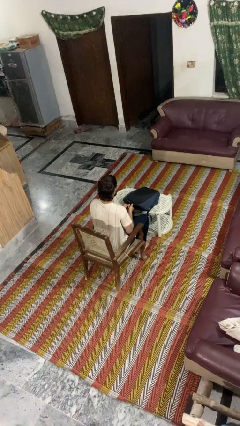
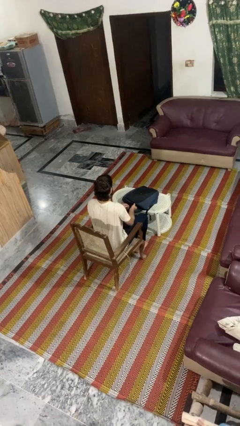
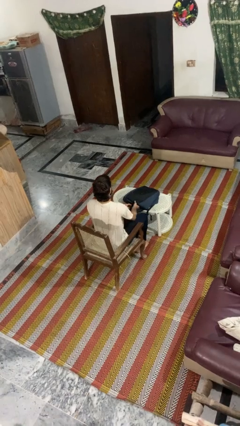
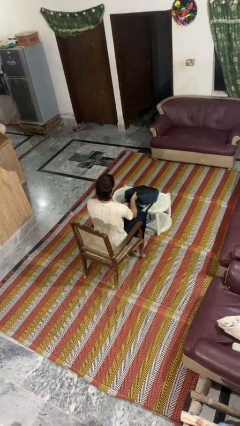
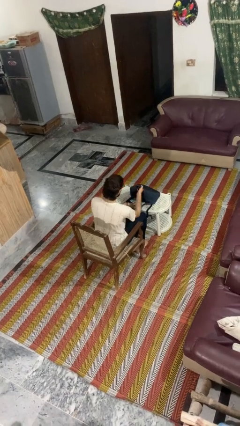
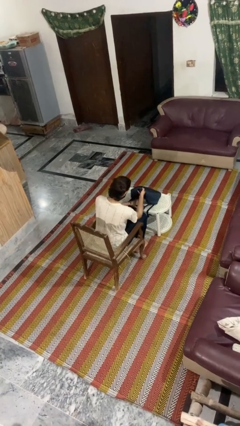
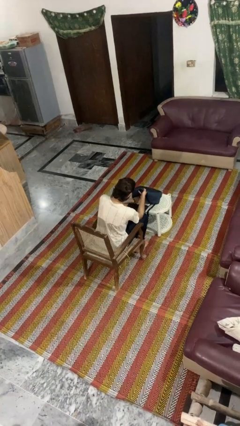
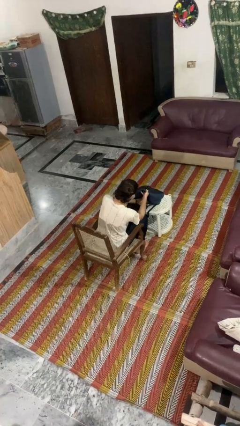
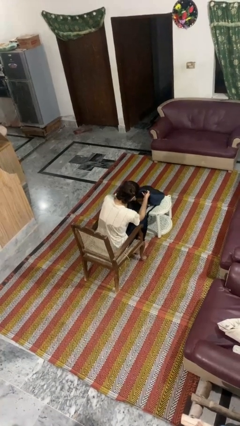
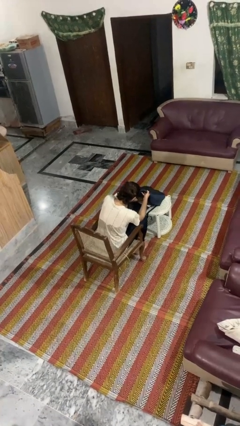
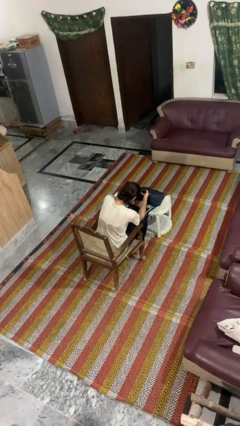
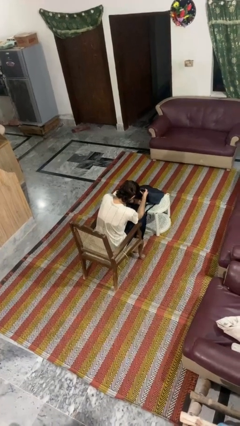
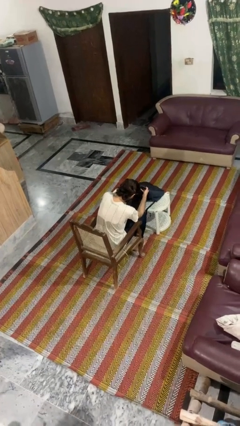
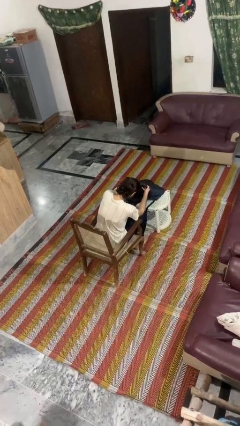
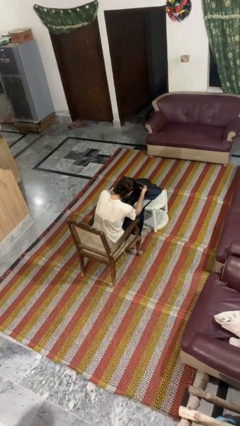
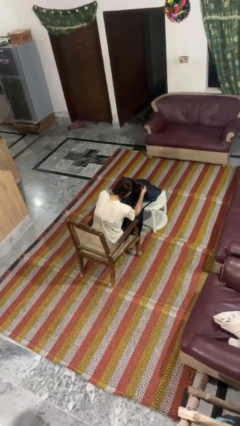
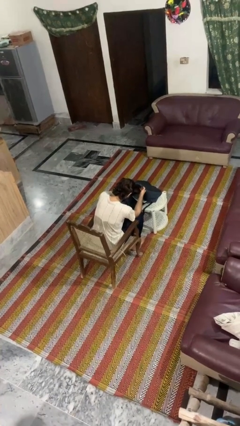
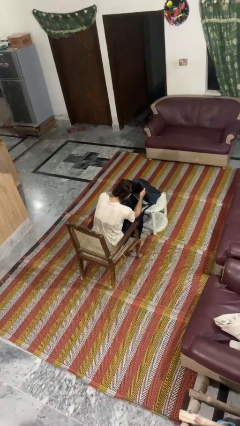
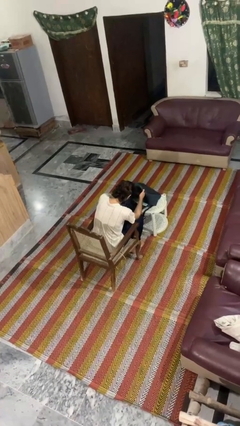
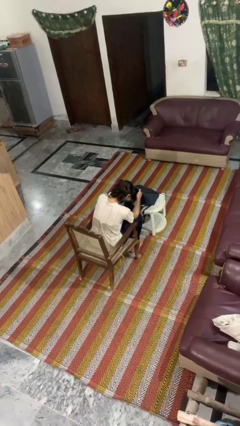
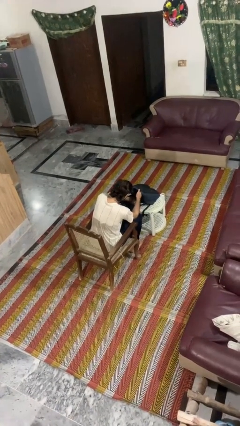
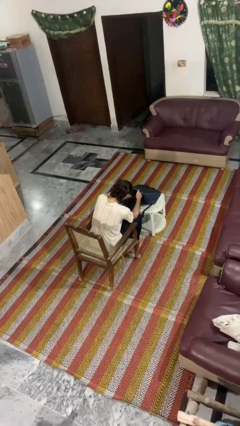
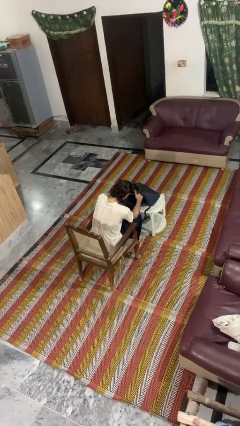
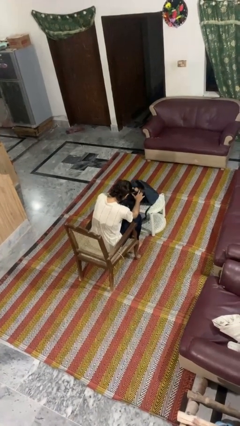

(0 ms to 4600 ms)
person searches in backpack

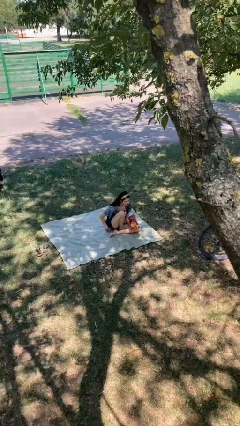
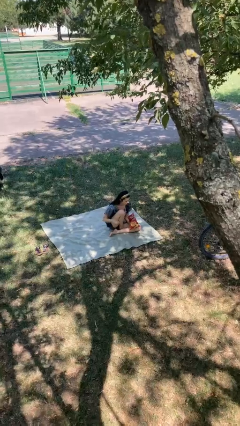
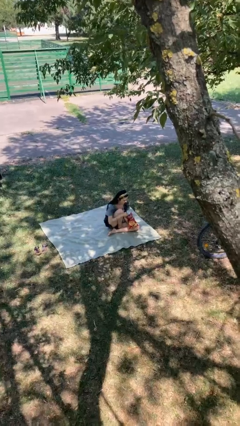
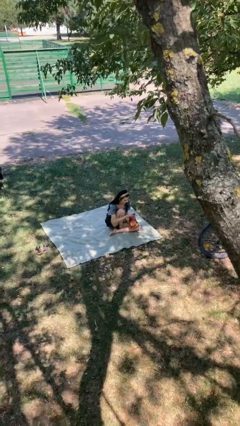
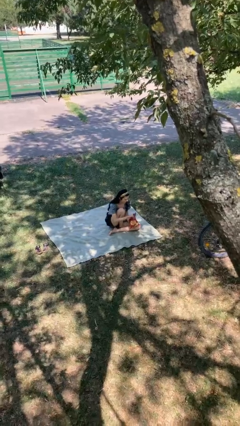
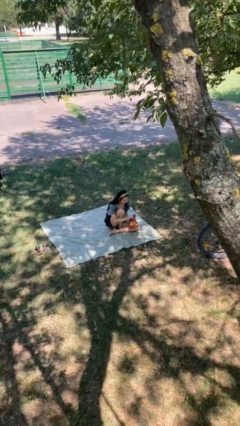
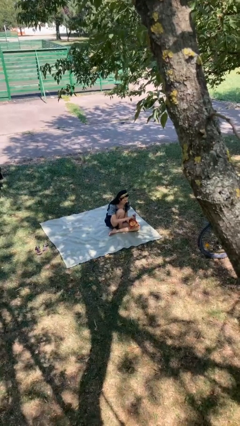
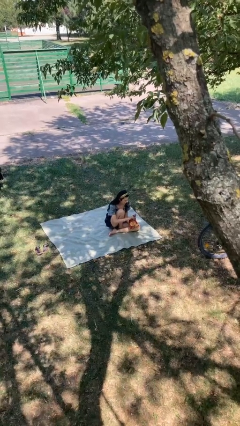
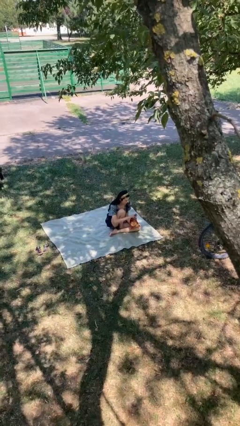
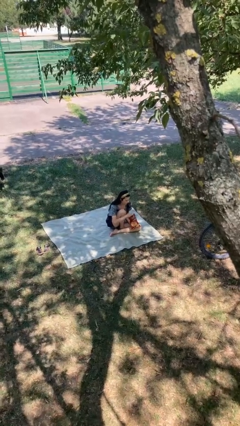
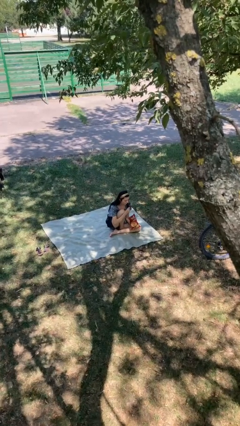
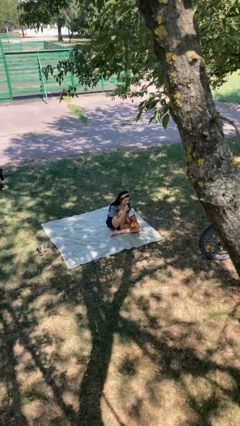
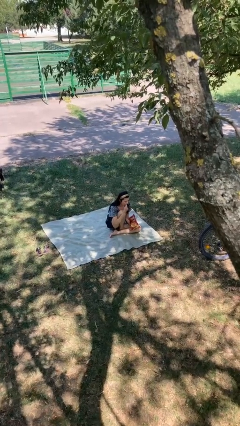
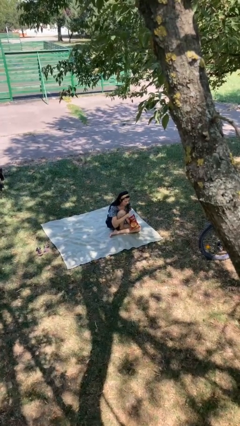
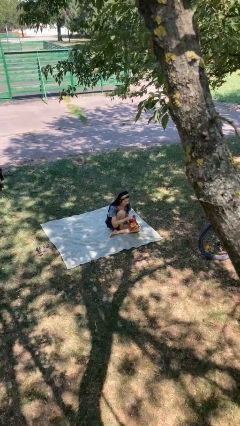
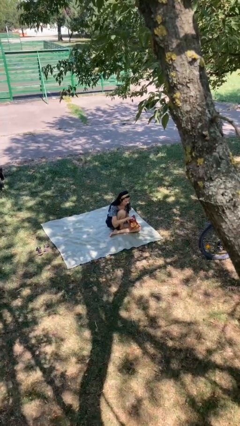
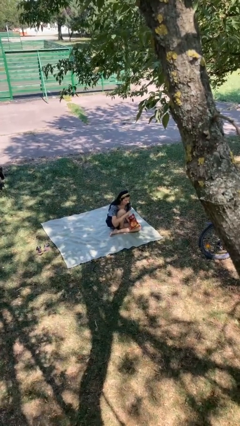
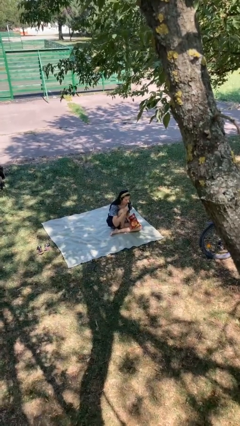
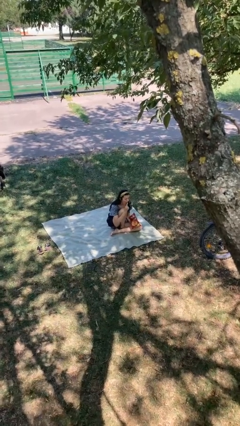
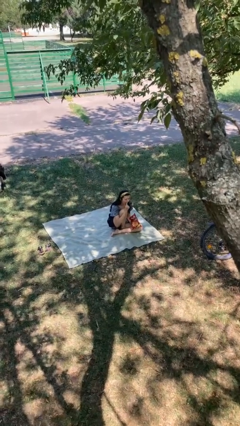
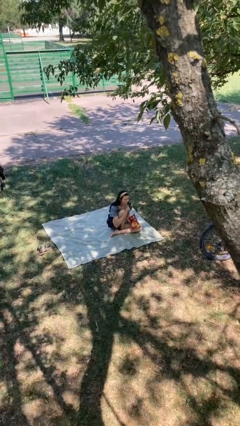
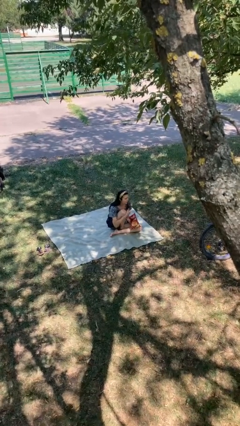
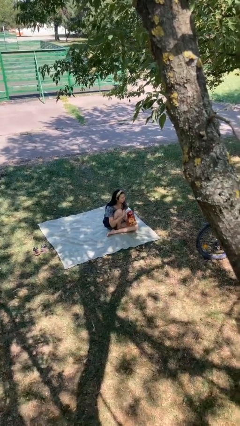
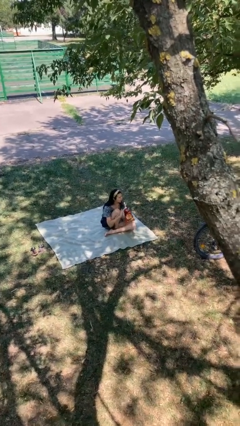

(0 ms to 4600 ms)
person eats snack from bag

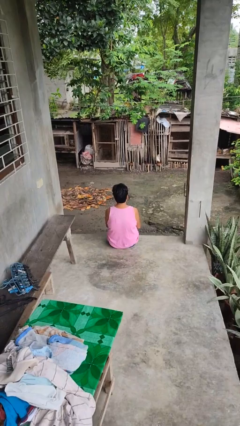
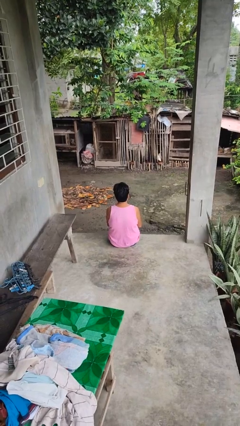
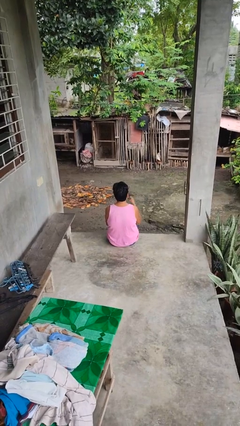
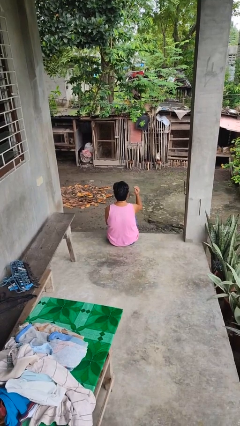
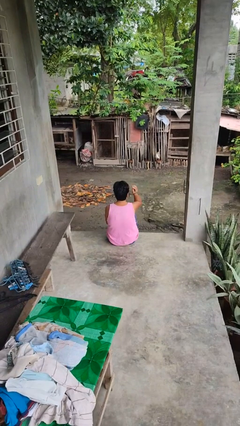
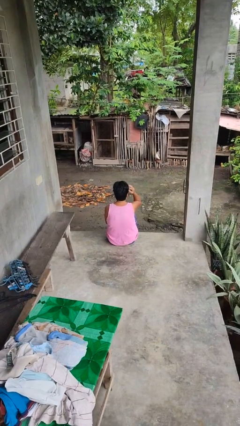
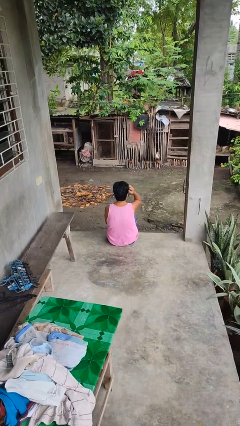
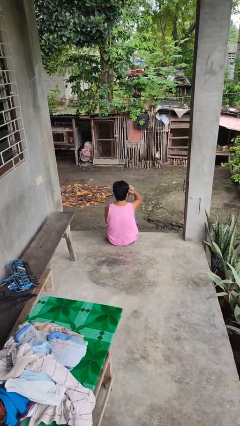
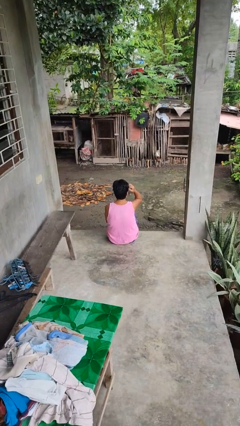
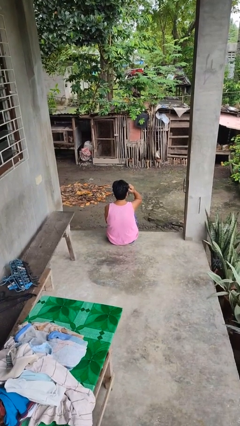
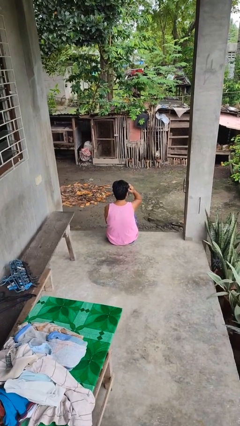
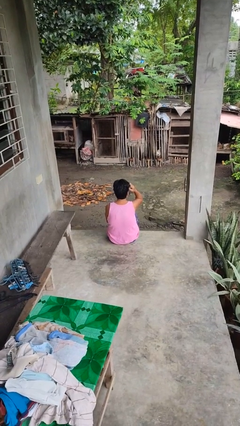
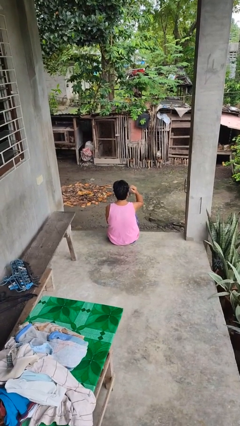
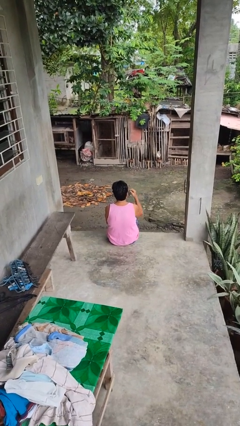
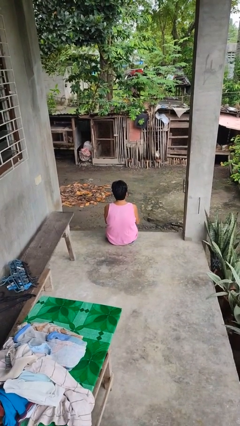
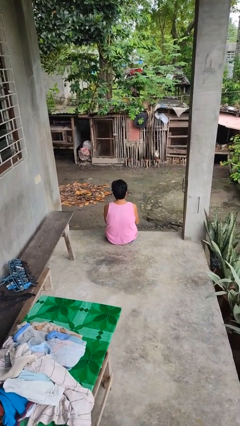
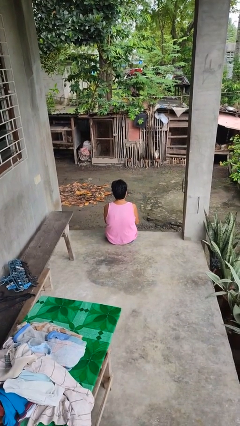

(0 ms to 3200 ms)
person scratches face

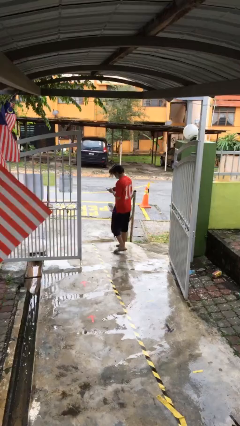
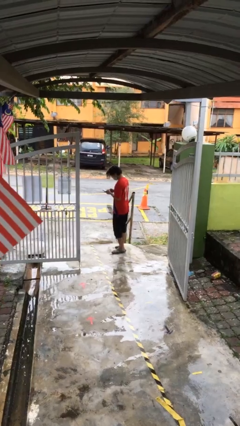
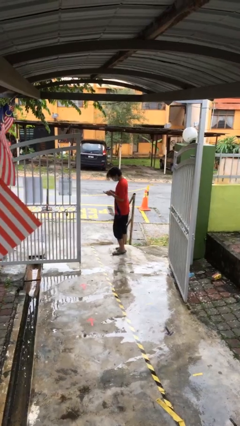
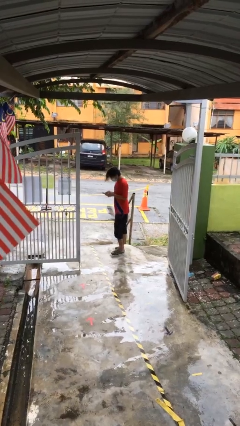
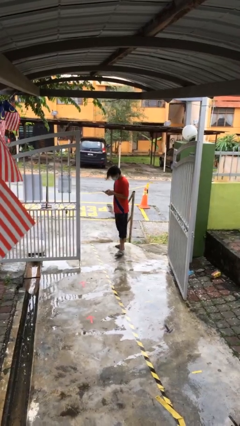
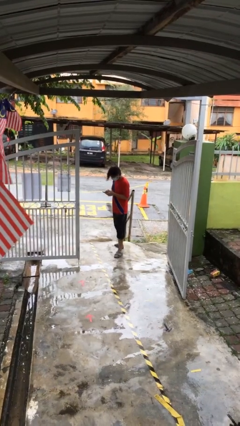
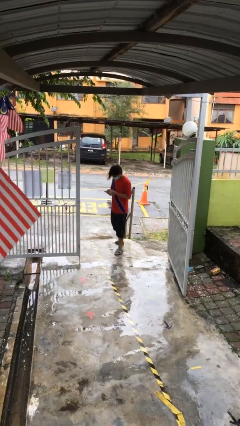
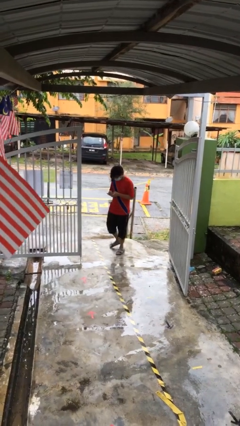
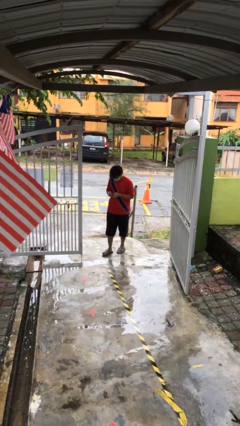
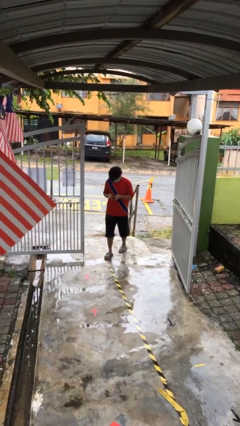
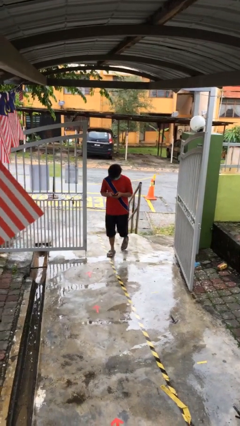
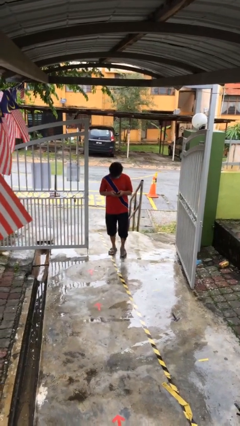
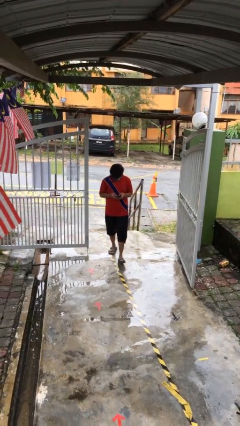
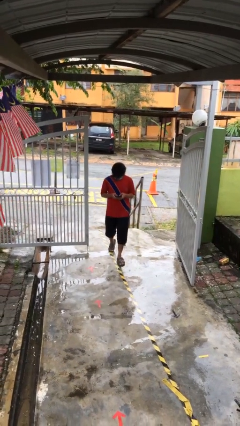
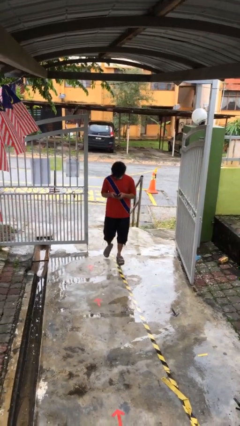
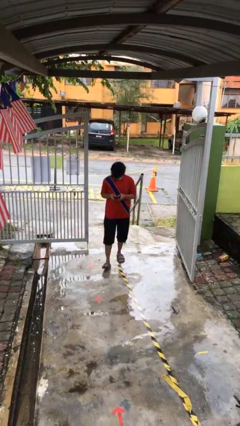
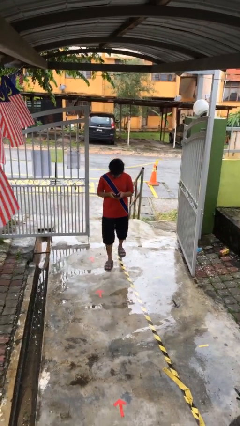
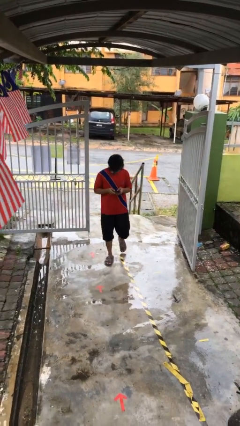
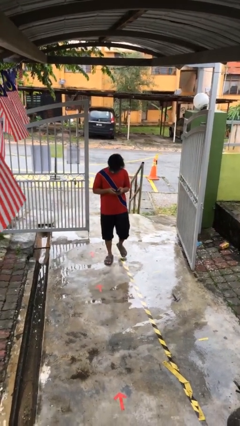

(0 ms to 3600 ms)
person enters scene through structure

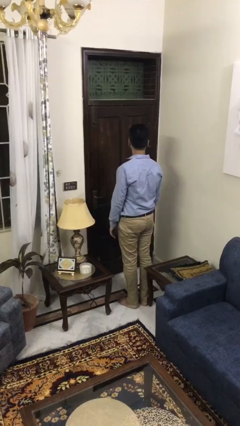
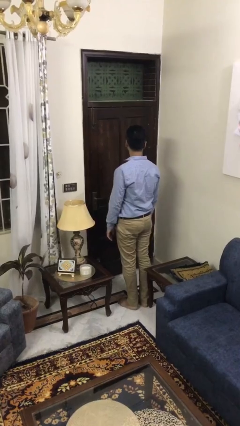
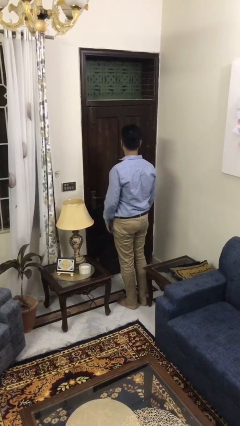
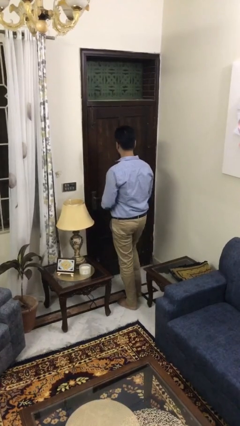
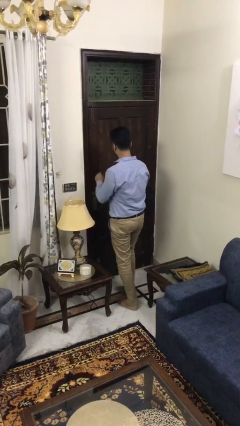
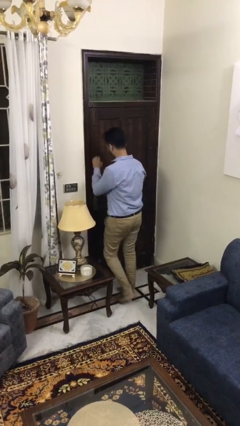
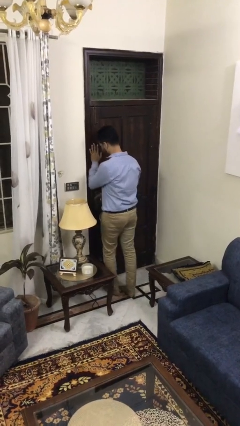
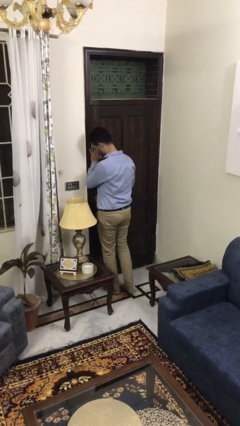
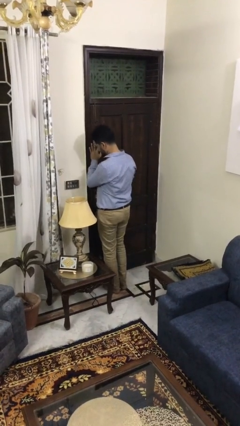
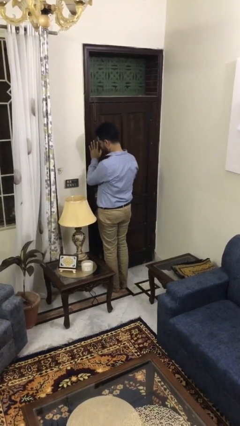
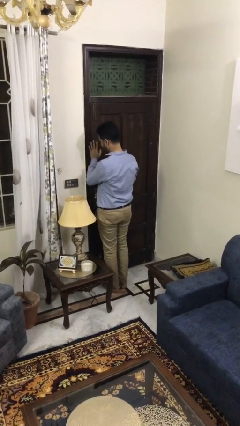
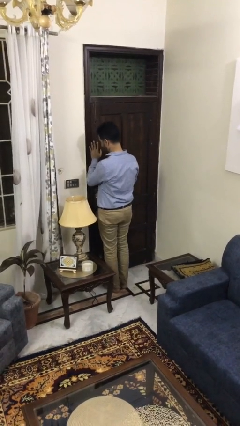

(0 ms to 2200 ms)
person bumps into wall
